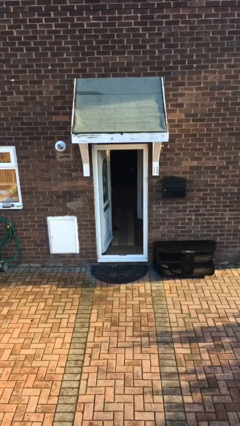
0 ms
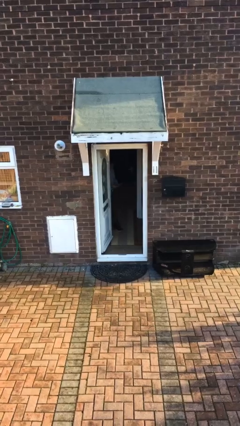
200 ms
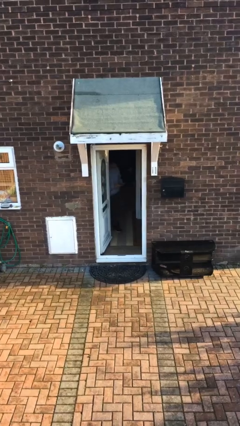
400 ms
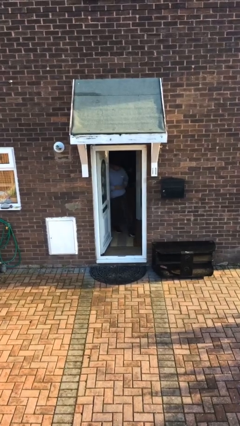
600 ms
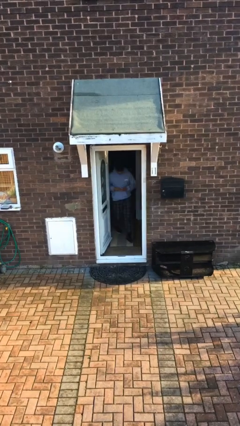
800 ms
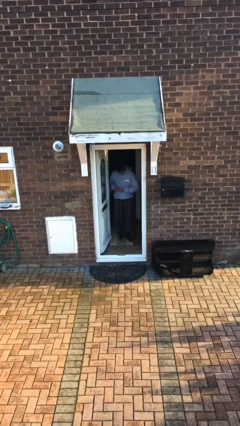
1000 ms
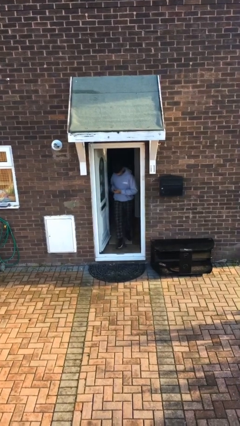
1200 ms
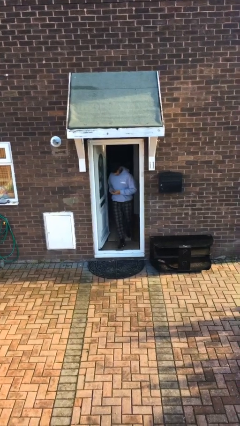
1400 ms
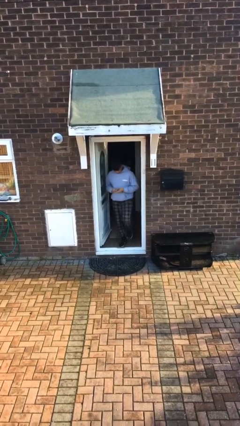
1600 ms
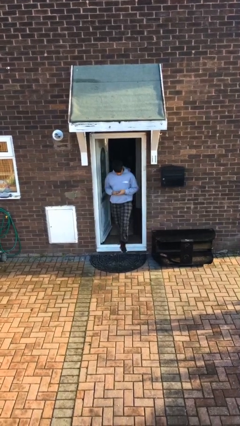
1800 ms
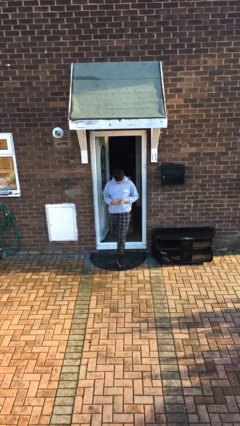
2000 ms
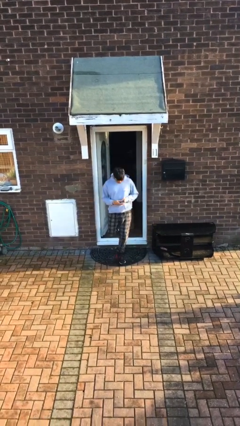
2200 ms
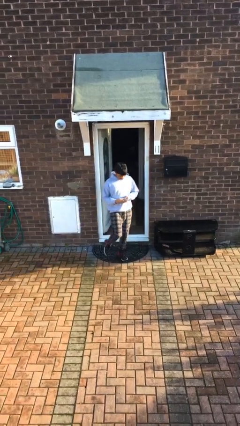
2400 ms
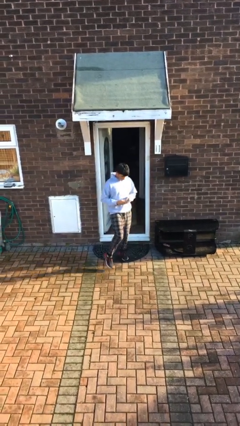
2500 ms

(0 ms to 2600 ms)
person enters scene through structure

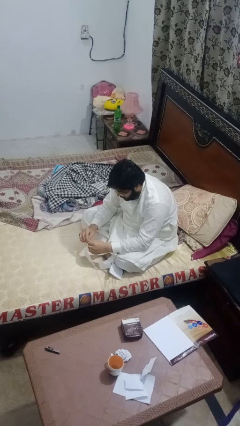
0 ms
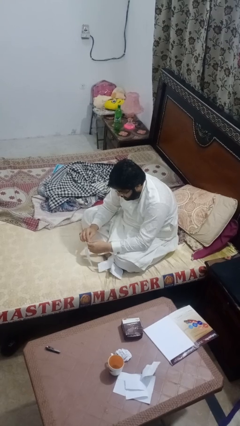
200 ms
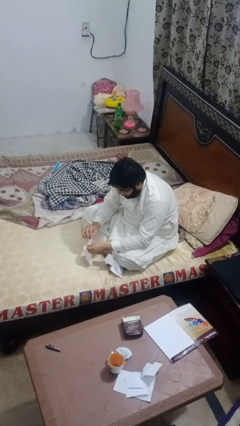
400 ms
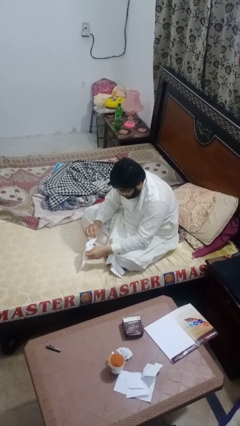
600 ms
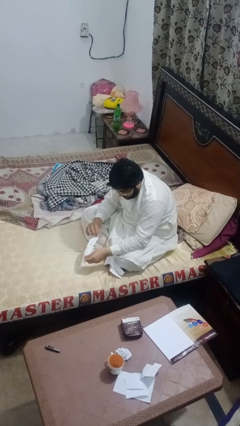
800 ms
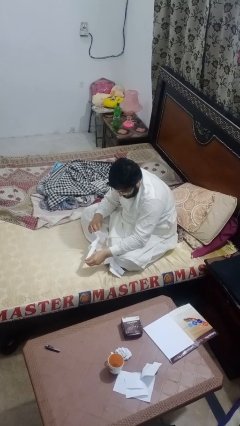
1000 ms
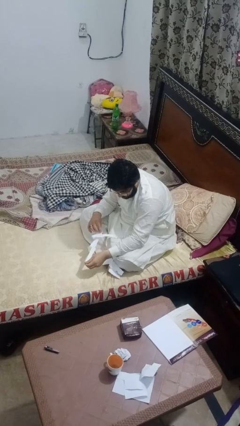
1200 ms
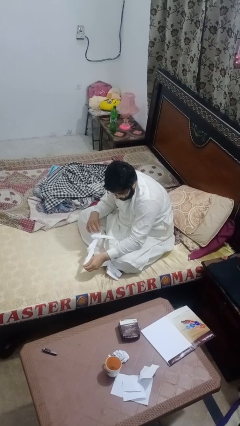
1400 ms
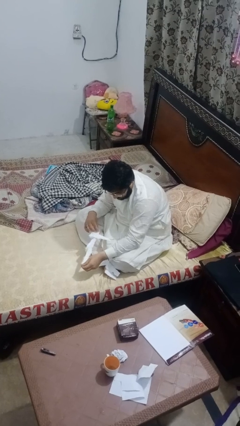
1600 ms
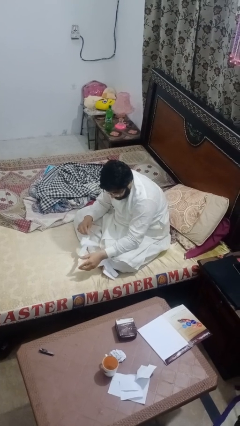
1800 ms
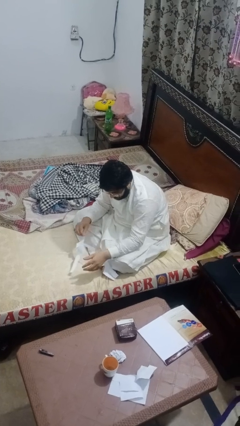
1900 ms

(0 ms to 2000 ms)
person tears paper

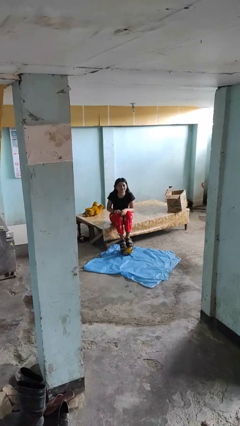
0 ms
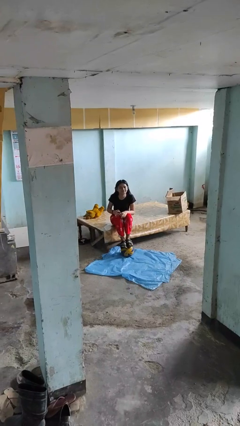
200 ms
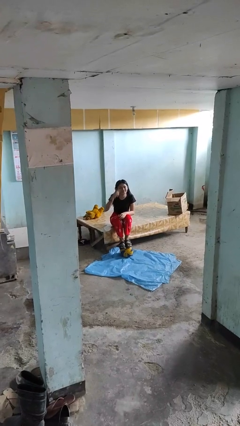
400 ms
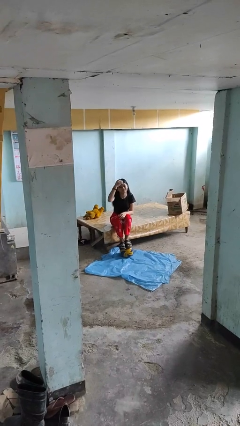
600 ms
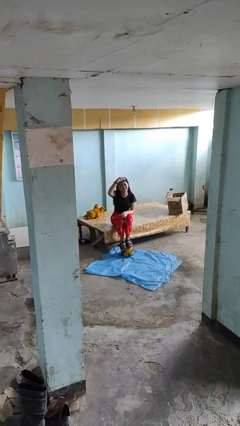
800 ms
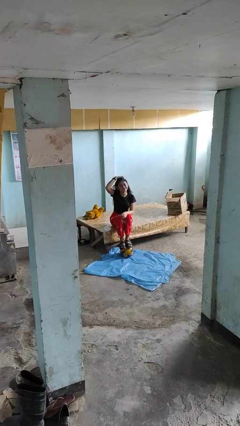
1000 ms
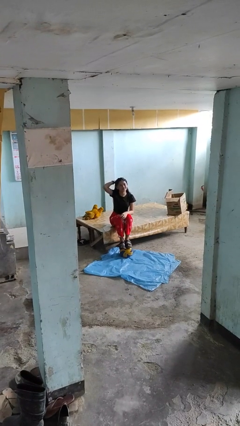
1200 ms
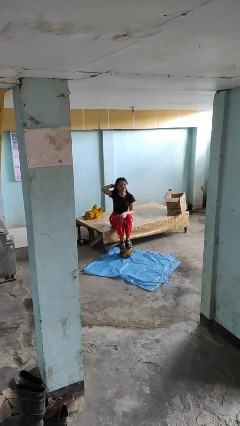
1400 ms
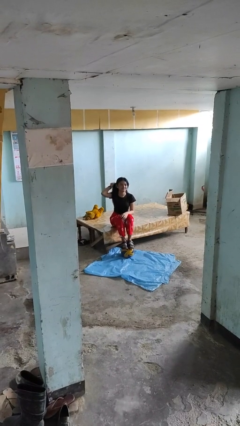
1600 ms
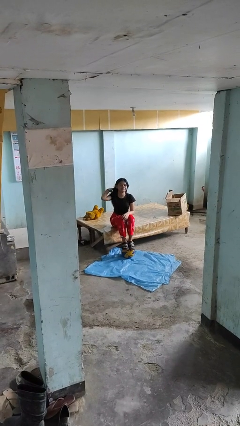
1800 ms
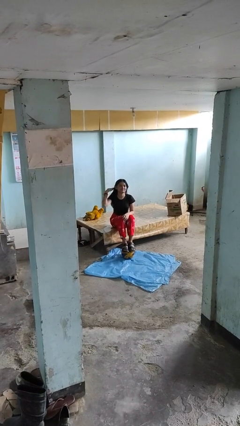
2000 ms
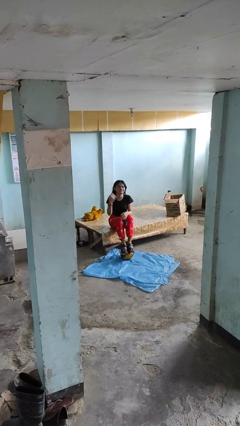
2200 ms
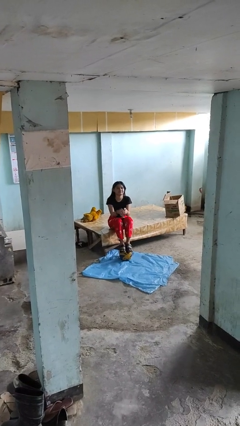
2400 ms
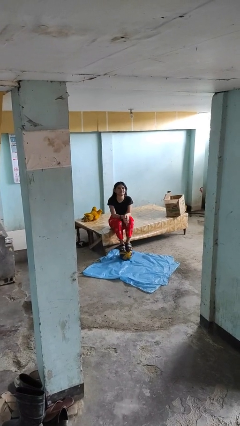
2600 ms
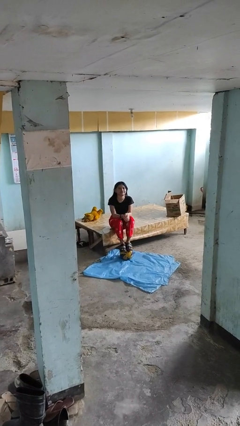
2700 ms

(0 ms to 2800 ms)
person strokes hair

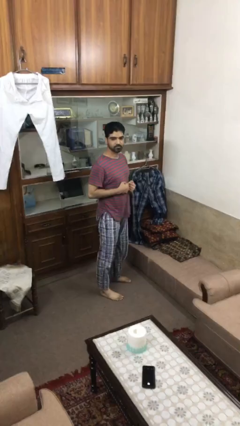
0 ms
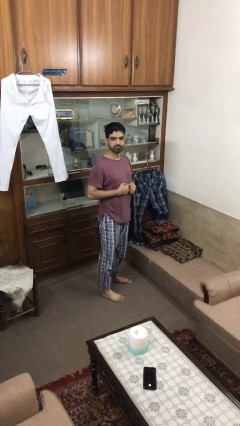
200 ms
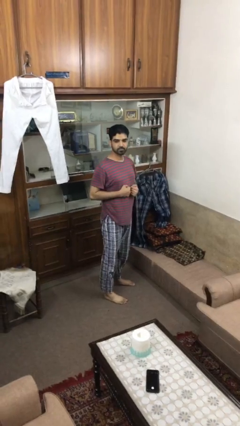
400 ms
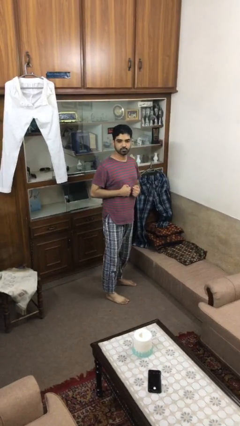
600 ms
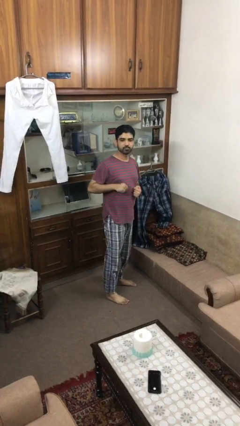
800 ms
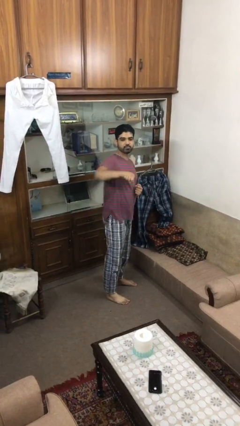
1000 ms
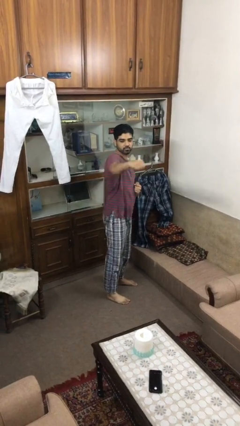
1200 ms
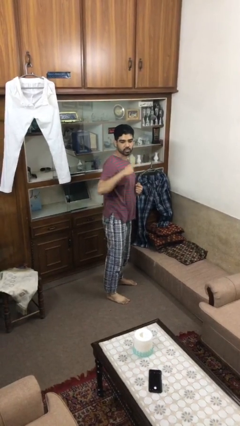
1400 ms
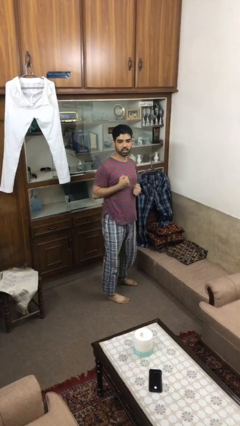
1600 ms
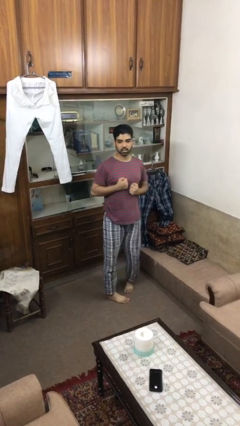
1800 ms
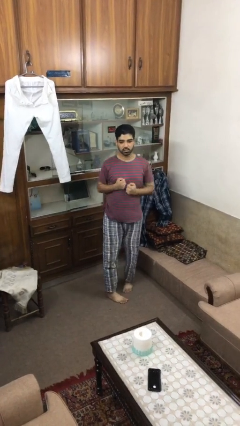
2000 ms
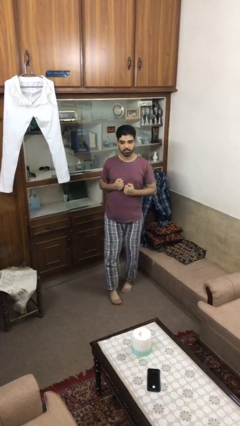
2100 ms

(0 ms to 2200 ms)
person karate chop

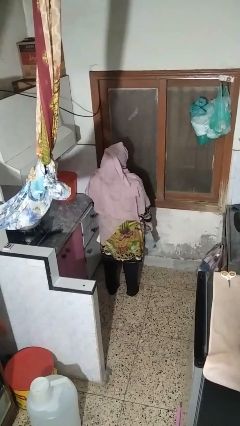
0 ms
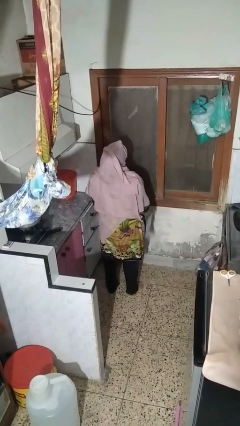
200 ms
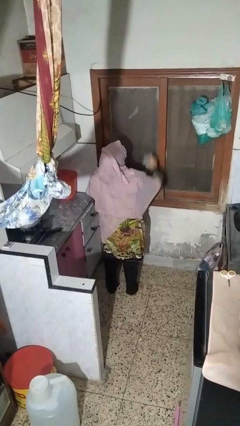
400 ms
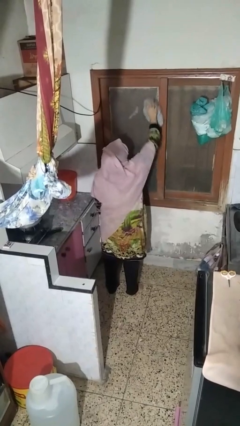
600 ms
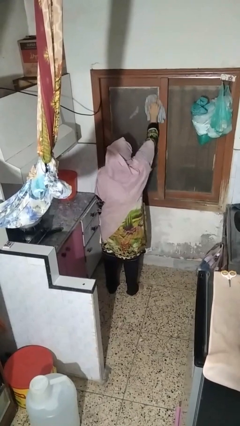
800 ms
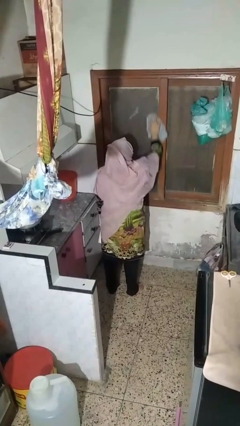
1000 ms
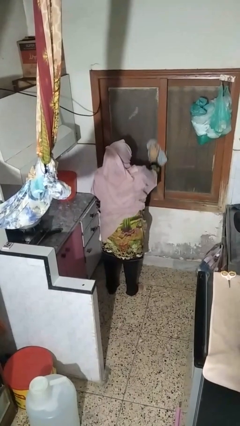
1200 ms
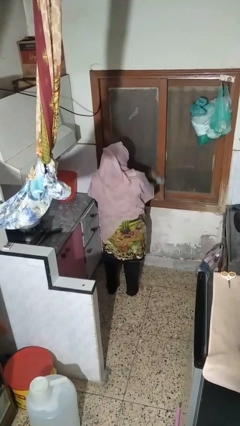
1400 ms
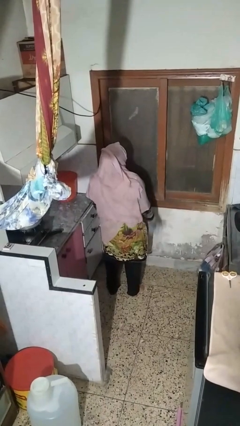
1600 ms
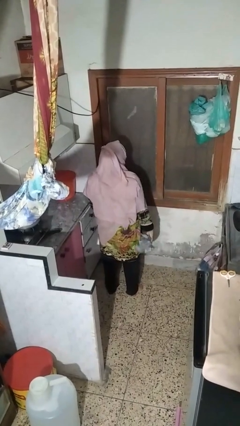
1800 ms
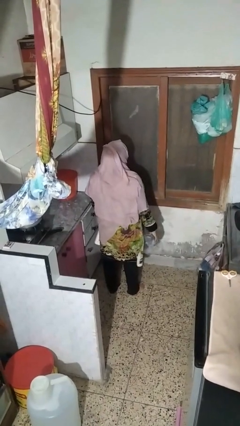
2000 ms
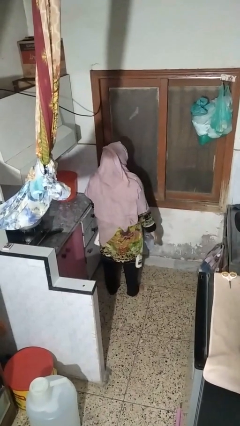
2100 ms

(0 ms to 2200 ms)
person washes window

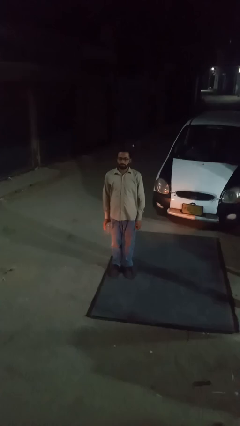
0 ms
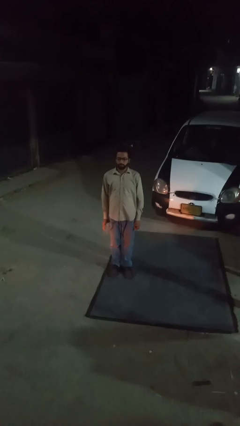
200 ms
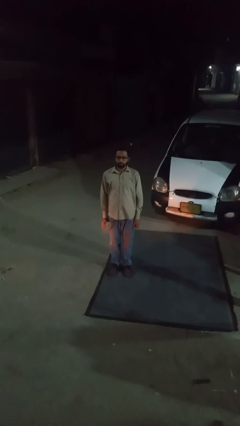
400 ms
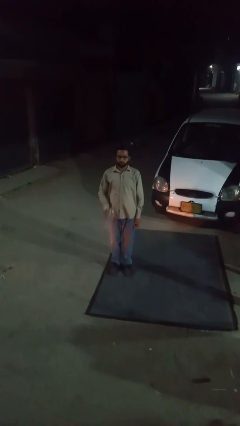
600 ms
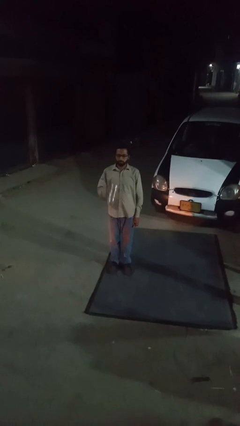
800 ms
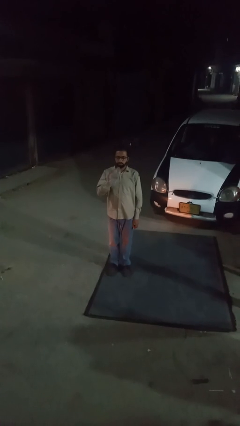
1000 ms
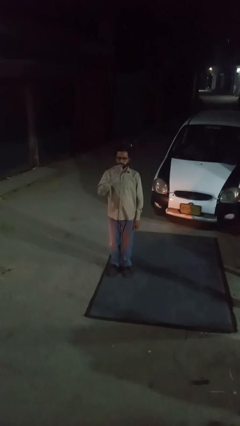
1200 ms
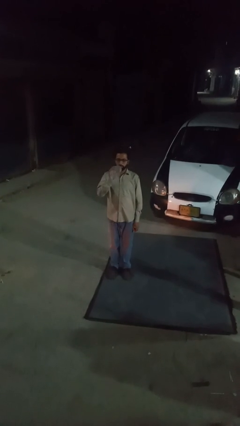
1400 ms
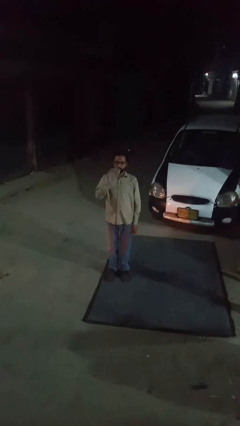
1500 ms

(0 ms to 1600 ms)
person drinks from bottle

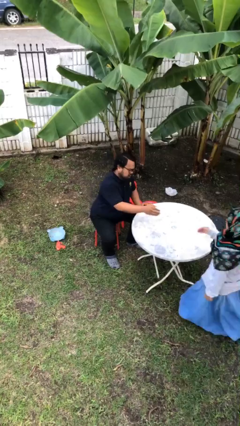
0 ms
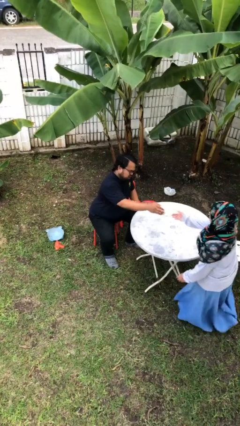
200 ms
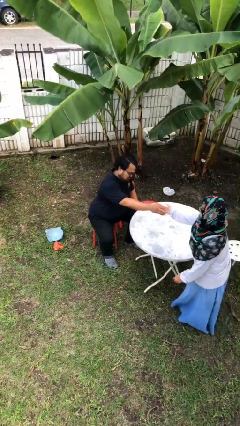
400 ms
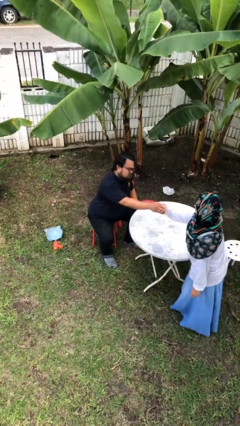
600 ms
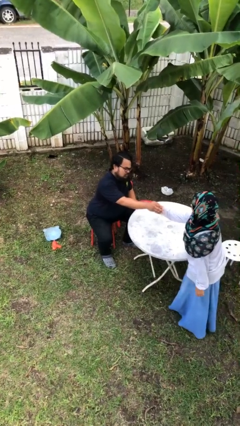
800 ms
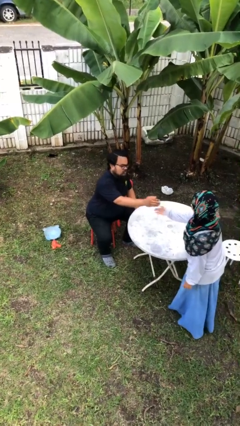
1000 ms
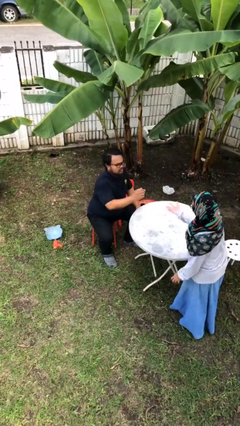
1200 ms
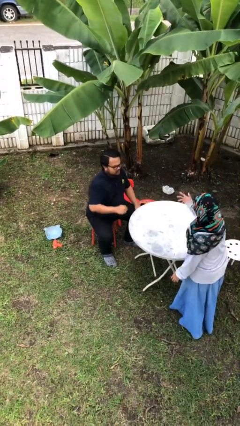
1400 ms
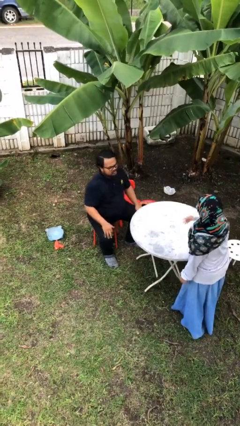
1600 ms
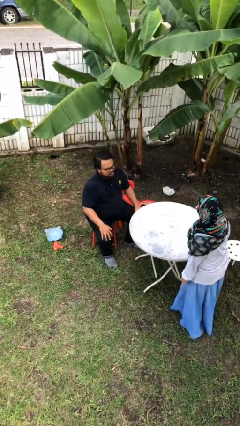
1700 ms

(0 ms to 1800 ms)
person shakes hand

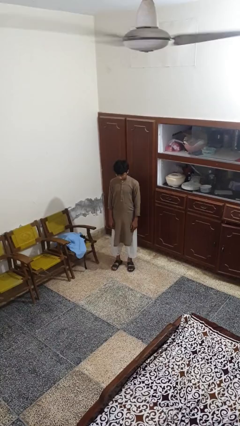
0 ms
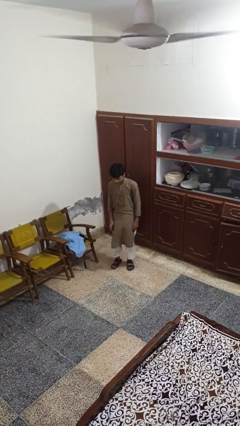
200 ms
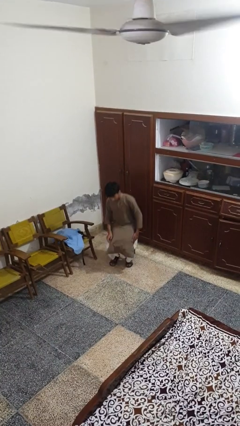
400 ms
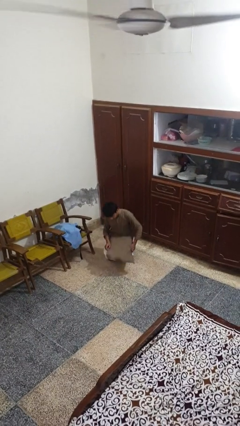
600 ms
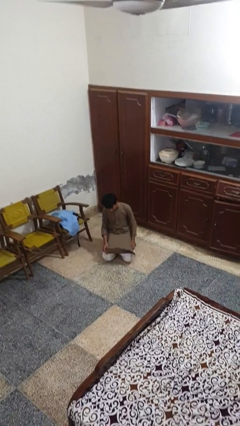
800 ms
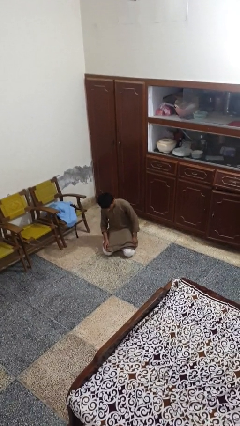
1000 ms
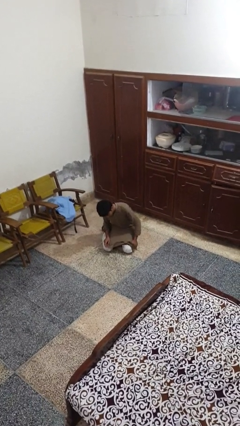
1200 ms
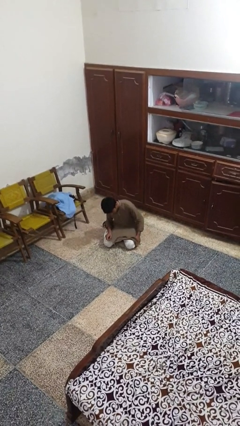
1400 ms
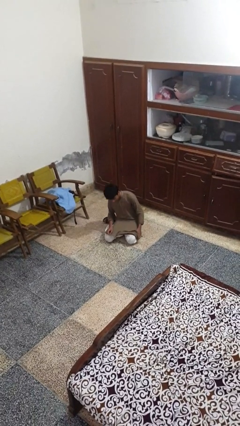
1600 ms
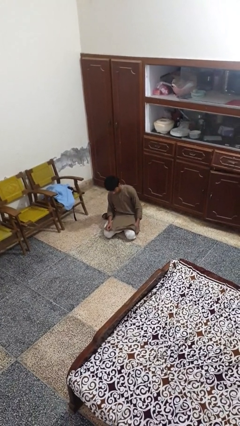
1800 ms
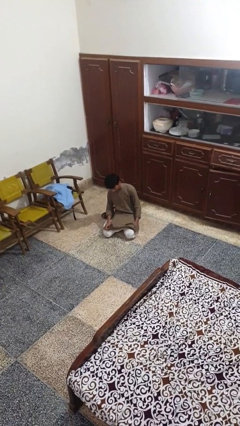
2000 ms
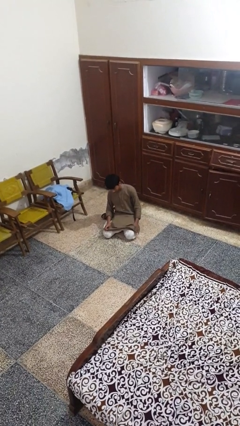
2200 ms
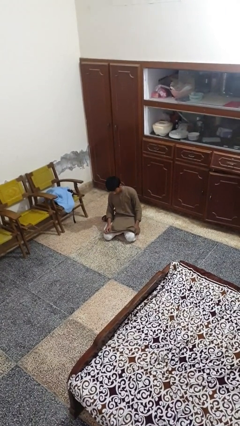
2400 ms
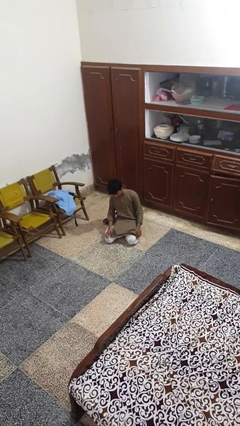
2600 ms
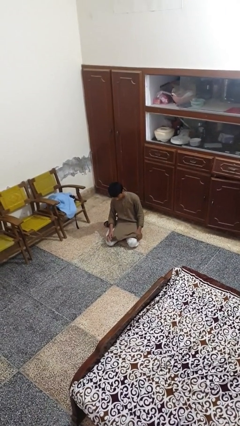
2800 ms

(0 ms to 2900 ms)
person falls while standing
